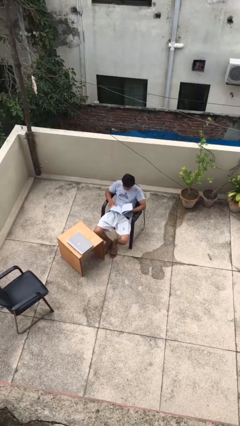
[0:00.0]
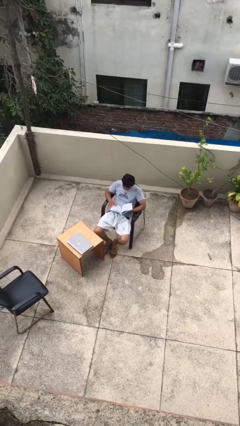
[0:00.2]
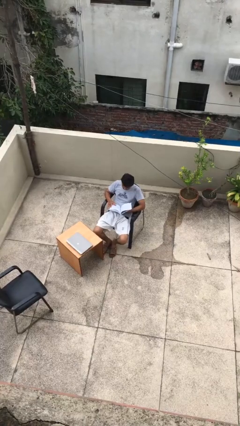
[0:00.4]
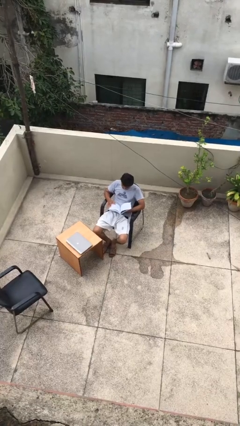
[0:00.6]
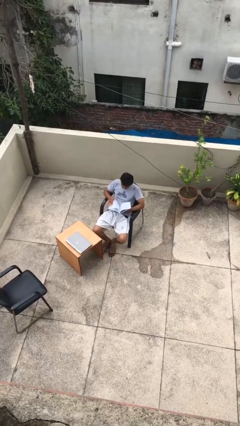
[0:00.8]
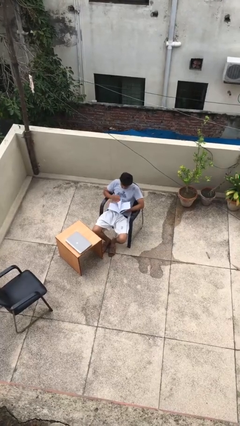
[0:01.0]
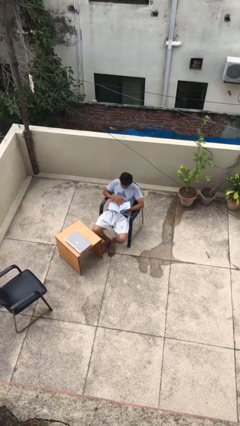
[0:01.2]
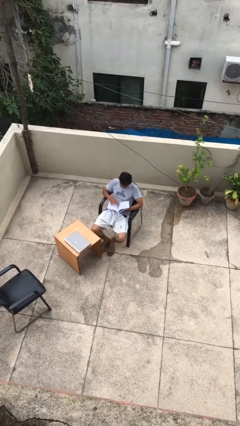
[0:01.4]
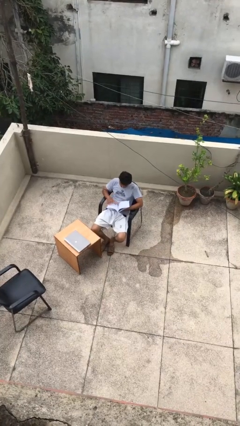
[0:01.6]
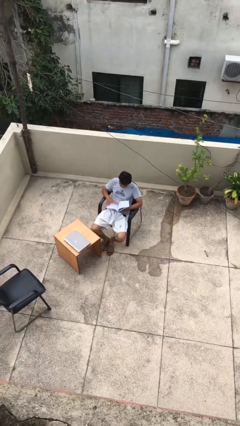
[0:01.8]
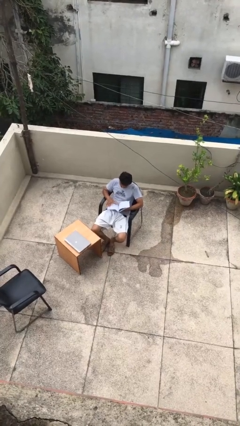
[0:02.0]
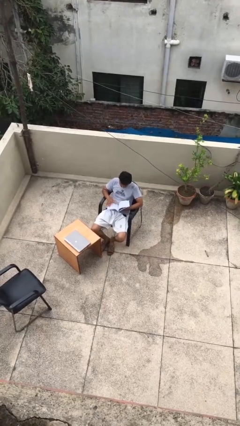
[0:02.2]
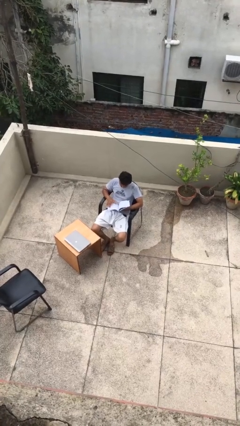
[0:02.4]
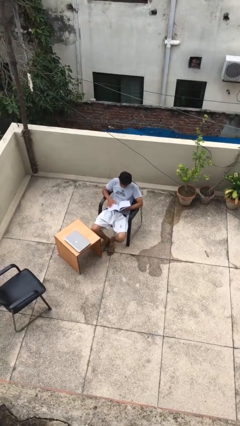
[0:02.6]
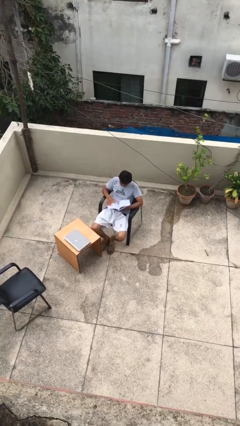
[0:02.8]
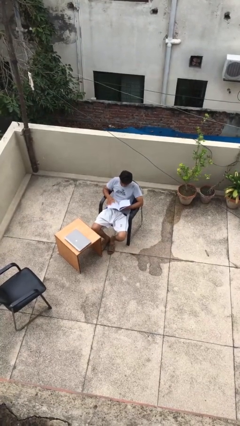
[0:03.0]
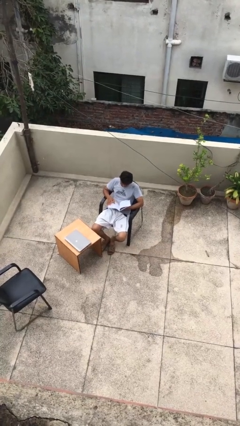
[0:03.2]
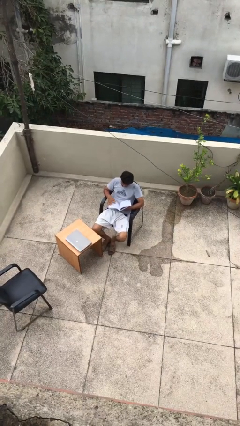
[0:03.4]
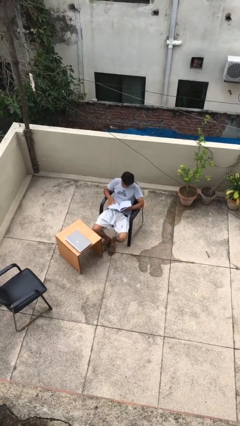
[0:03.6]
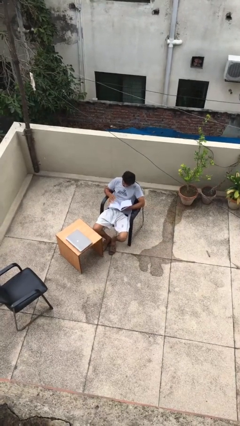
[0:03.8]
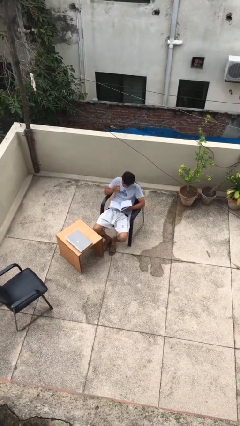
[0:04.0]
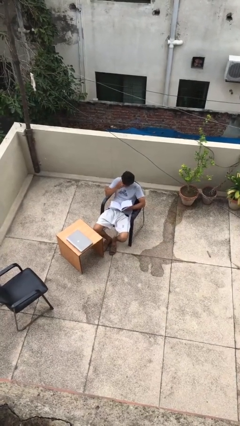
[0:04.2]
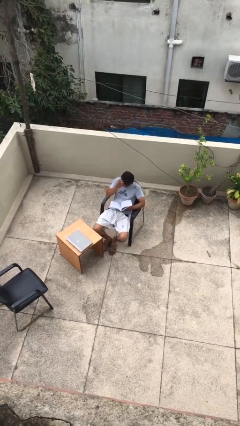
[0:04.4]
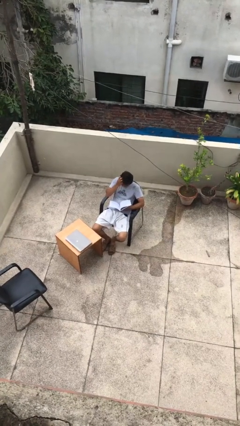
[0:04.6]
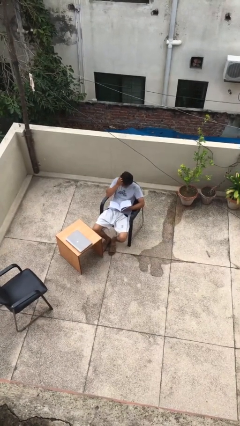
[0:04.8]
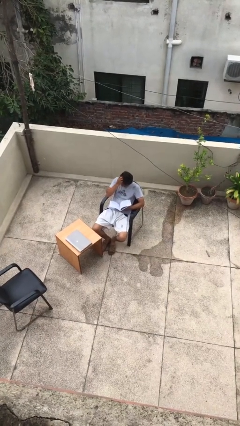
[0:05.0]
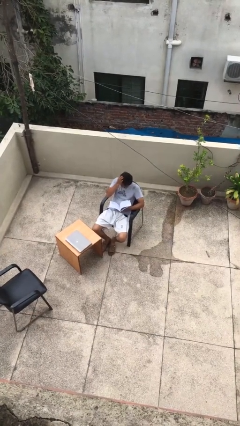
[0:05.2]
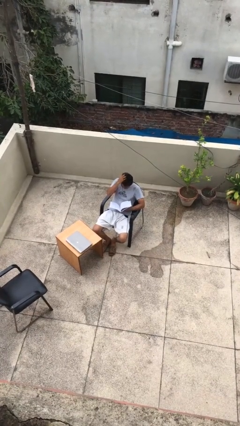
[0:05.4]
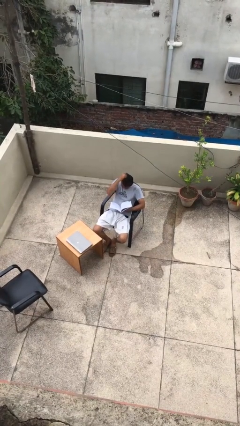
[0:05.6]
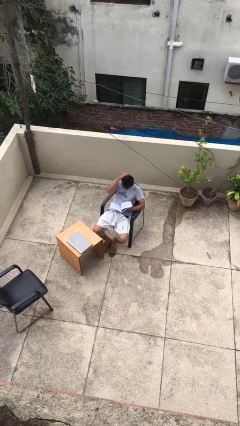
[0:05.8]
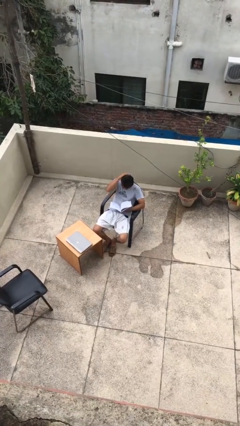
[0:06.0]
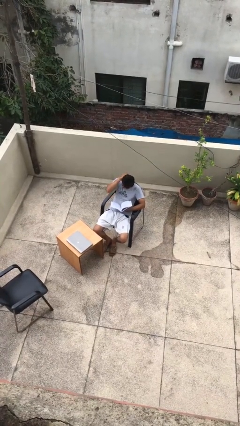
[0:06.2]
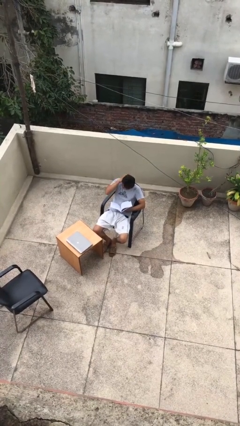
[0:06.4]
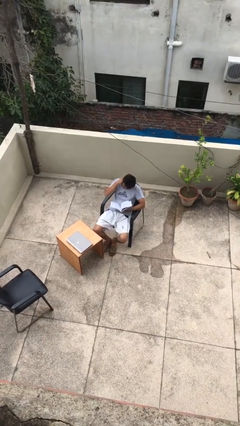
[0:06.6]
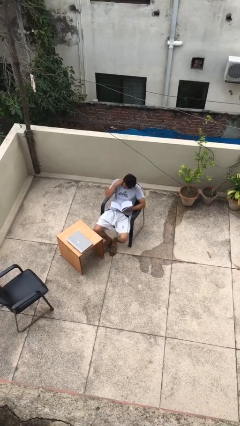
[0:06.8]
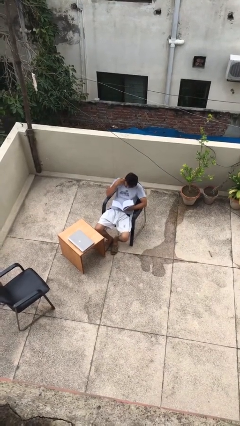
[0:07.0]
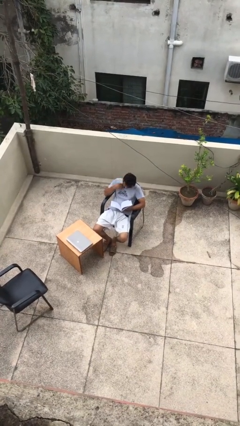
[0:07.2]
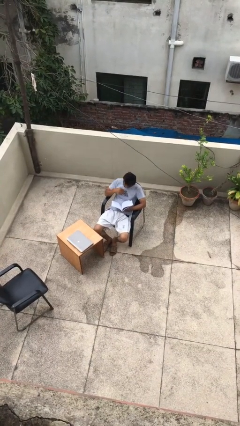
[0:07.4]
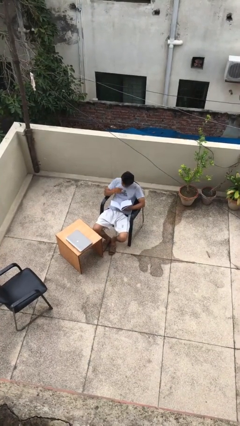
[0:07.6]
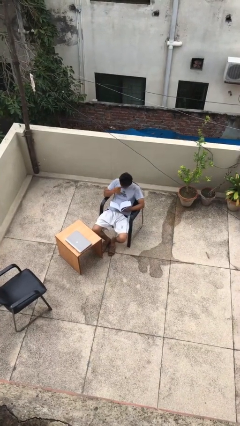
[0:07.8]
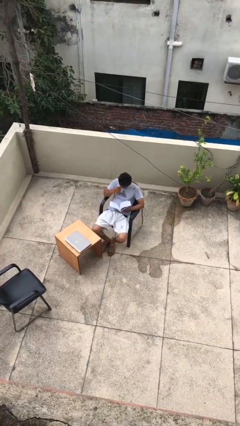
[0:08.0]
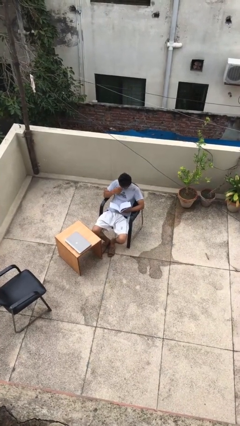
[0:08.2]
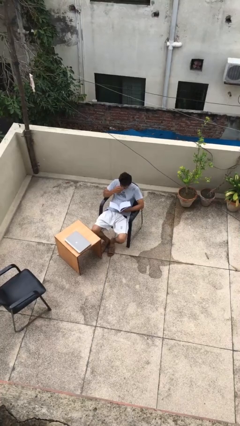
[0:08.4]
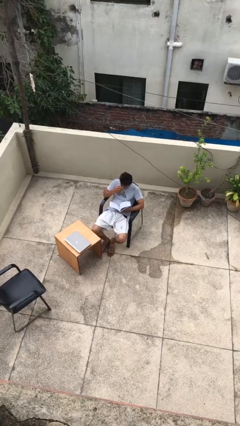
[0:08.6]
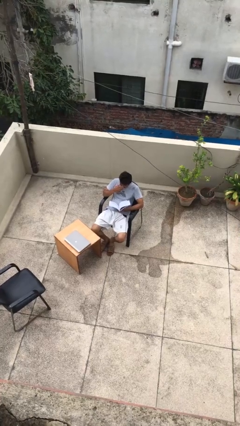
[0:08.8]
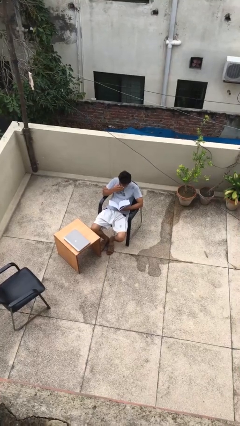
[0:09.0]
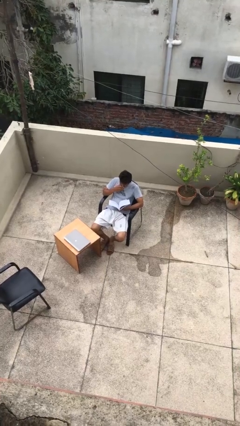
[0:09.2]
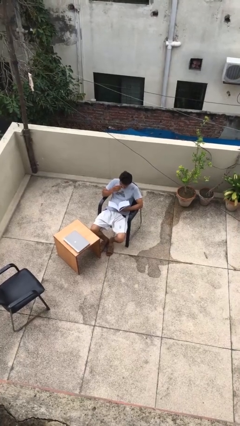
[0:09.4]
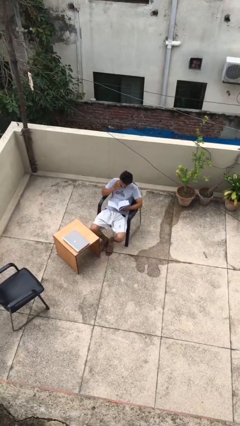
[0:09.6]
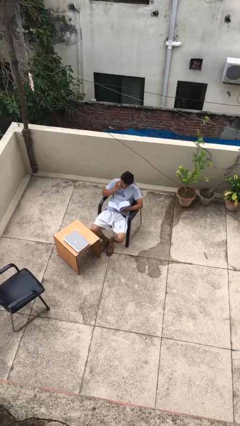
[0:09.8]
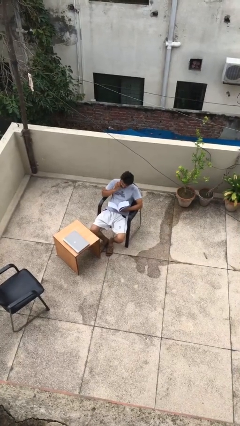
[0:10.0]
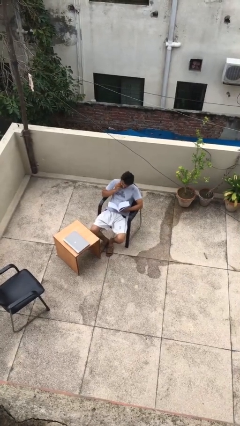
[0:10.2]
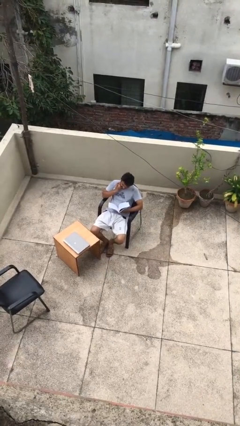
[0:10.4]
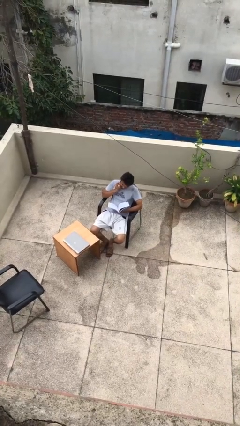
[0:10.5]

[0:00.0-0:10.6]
person reads document

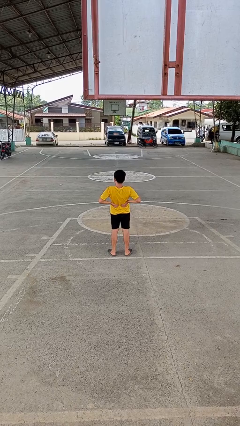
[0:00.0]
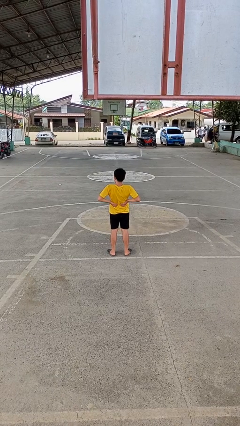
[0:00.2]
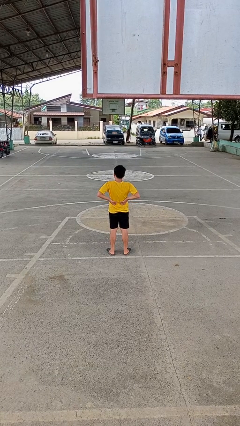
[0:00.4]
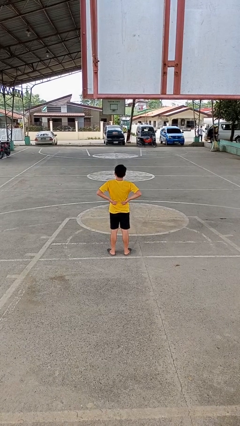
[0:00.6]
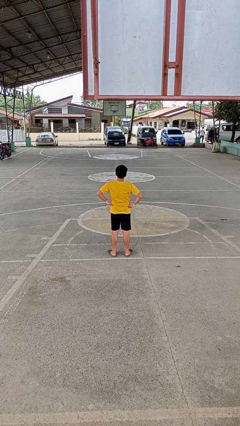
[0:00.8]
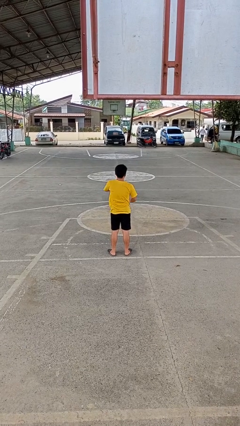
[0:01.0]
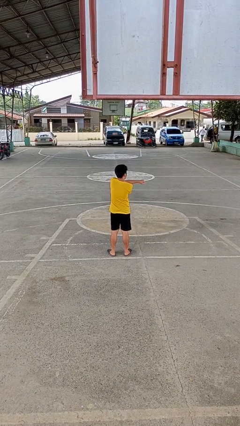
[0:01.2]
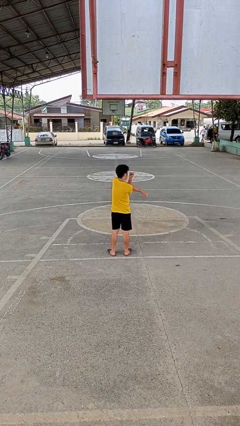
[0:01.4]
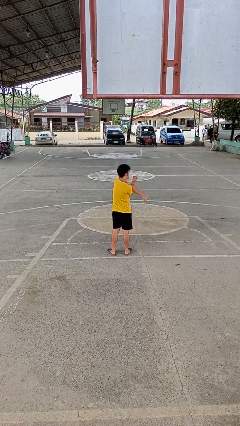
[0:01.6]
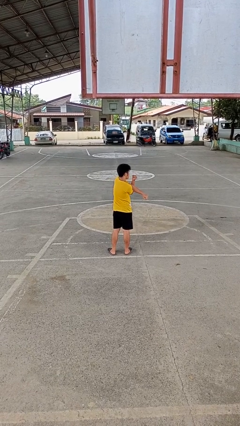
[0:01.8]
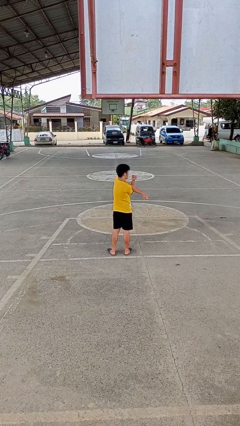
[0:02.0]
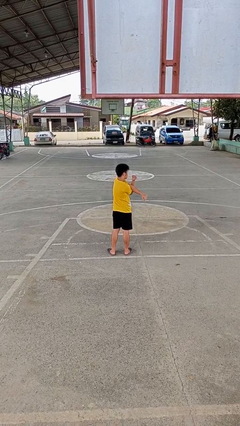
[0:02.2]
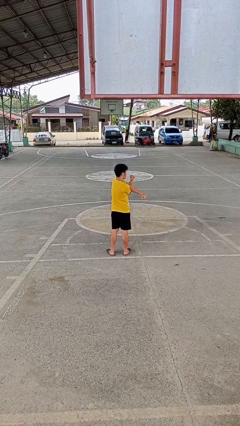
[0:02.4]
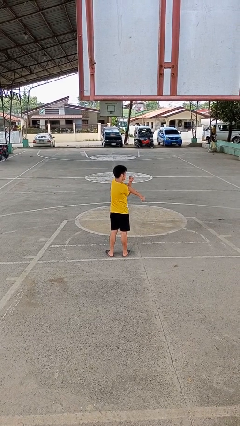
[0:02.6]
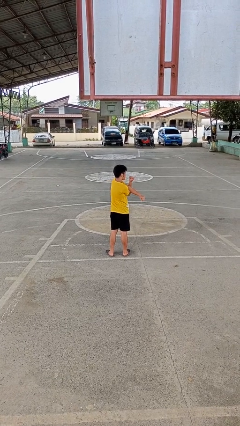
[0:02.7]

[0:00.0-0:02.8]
person stretches arms to side

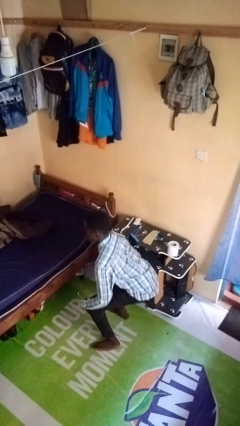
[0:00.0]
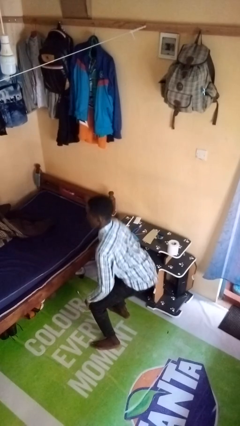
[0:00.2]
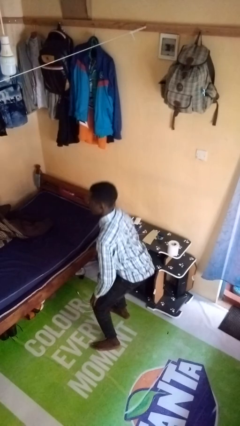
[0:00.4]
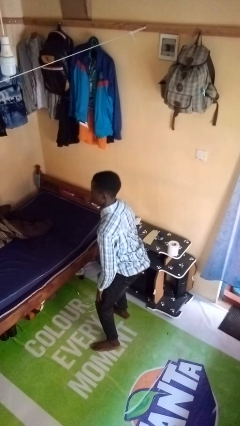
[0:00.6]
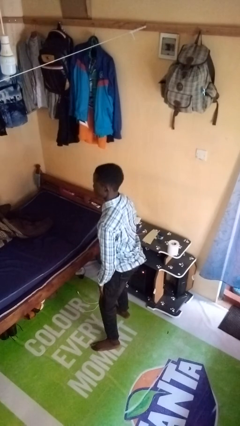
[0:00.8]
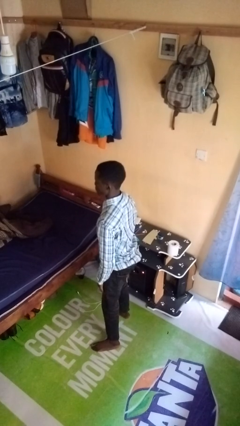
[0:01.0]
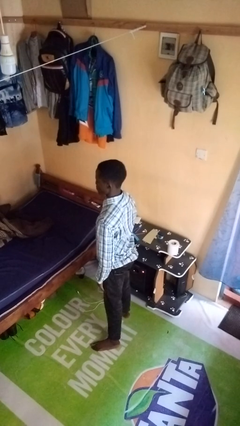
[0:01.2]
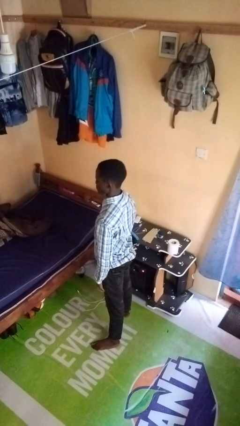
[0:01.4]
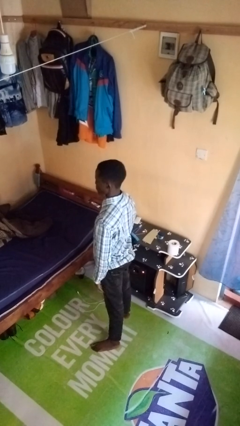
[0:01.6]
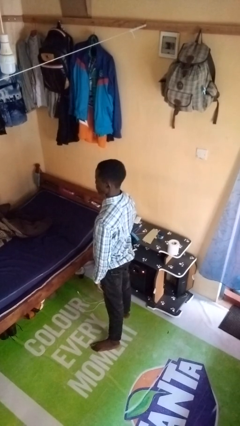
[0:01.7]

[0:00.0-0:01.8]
person stands up

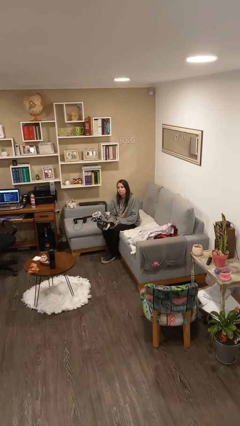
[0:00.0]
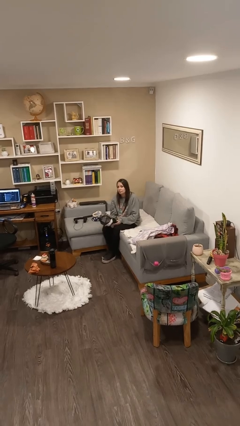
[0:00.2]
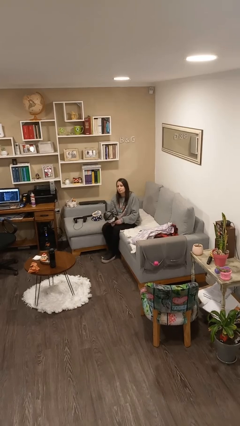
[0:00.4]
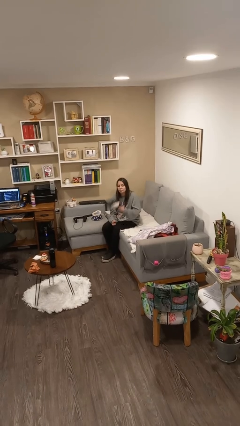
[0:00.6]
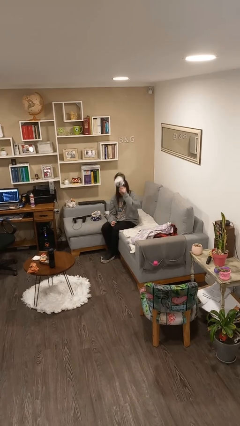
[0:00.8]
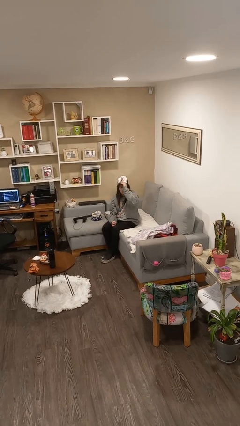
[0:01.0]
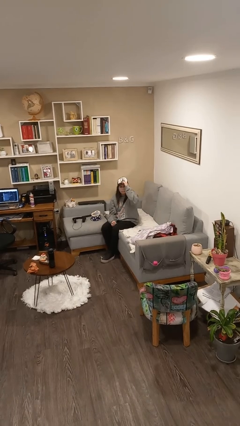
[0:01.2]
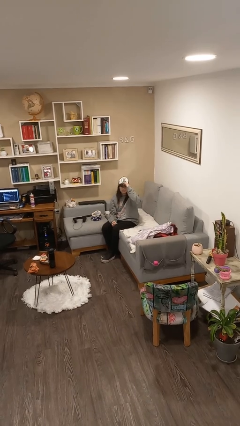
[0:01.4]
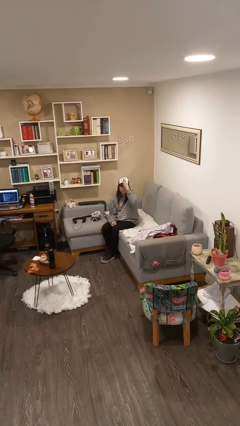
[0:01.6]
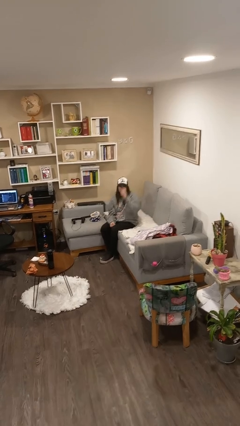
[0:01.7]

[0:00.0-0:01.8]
person puts on hat

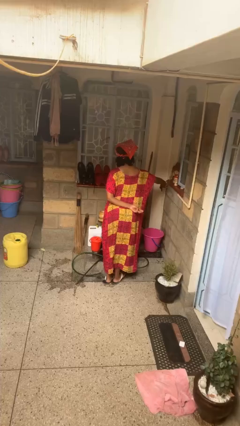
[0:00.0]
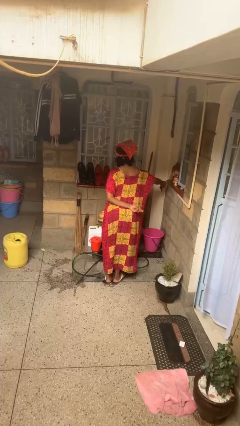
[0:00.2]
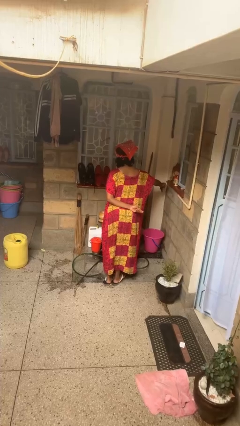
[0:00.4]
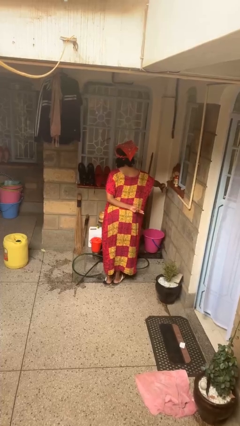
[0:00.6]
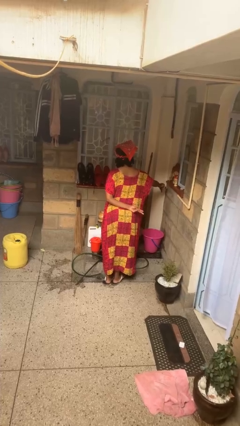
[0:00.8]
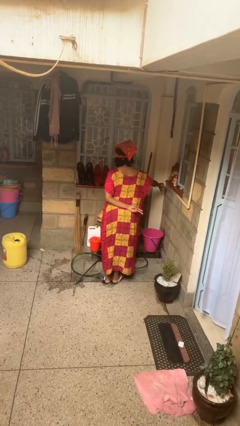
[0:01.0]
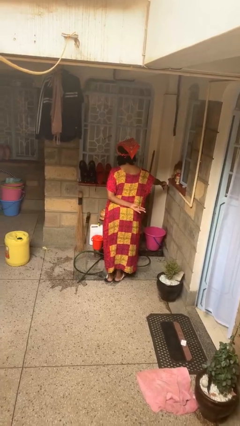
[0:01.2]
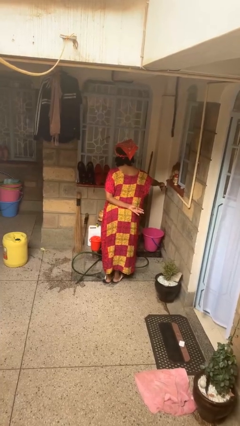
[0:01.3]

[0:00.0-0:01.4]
person turns off faucet
